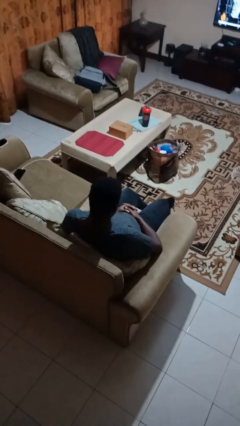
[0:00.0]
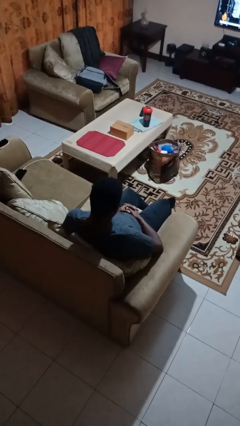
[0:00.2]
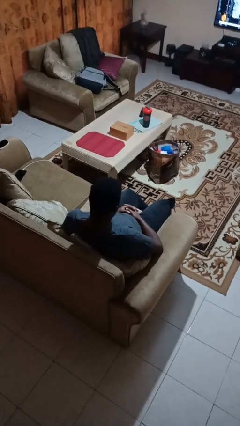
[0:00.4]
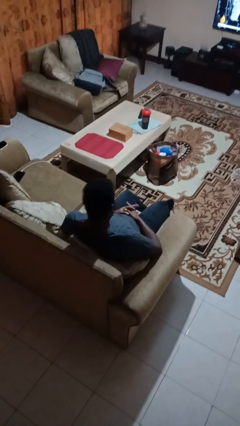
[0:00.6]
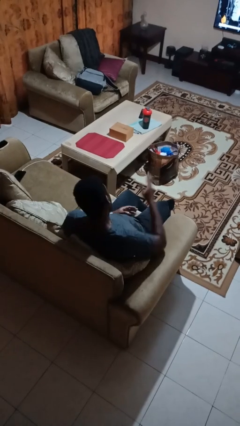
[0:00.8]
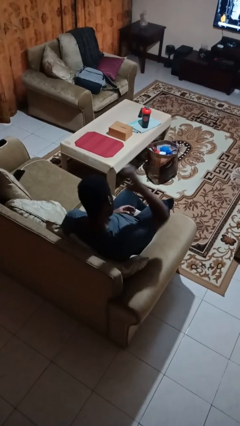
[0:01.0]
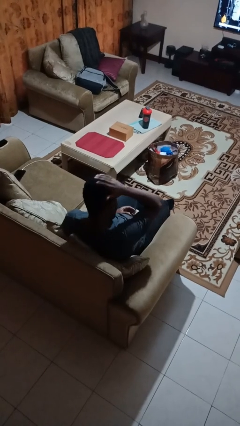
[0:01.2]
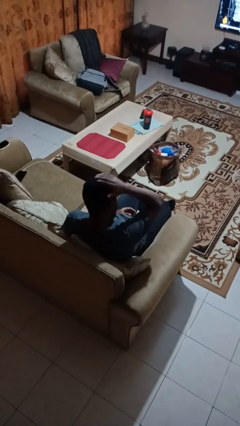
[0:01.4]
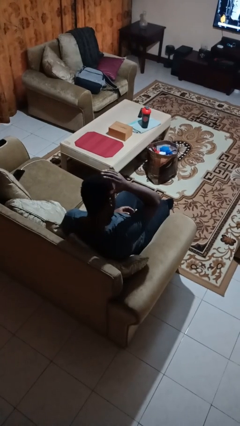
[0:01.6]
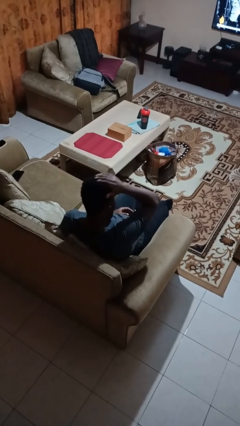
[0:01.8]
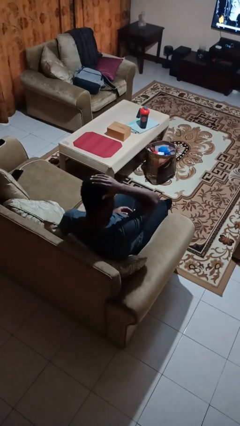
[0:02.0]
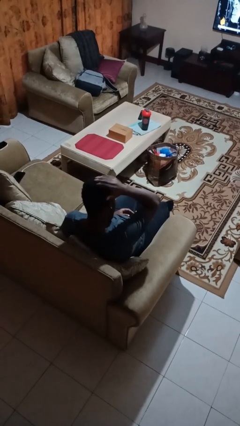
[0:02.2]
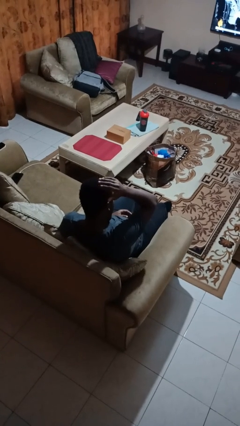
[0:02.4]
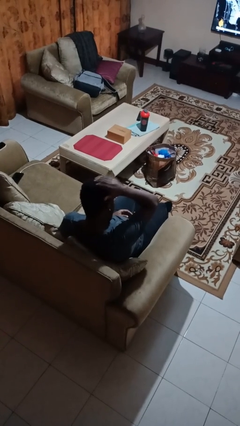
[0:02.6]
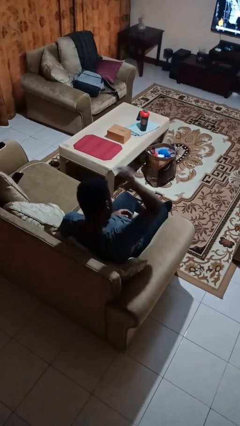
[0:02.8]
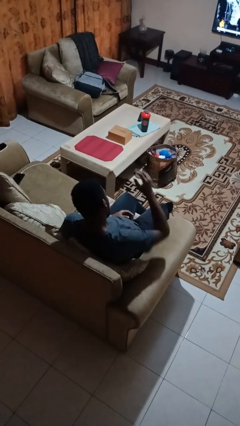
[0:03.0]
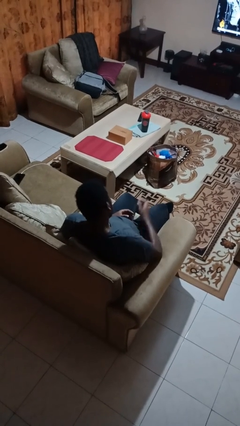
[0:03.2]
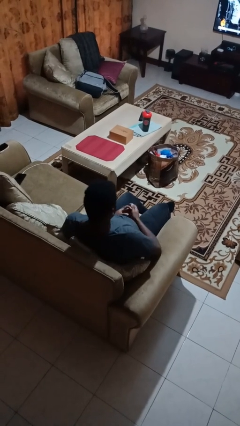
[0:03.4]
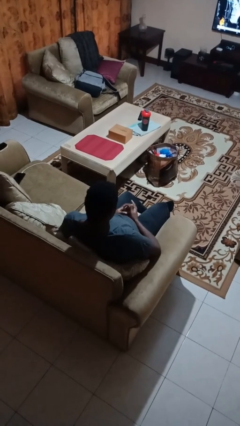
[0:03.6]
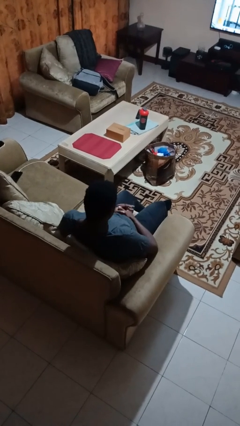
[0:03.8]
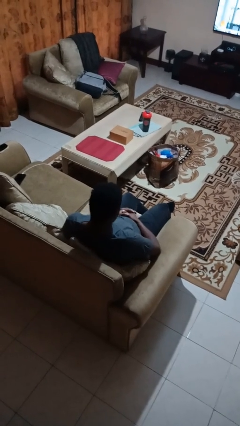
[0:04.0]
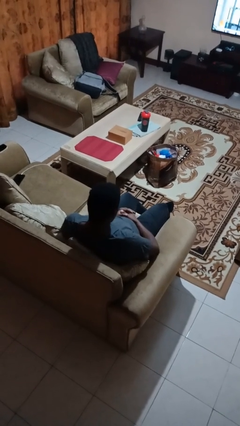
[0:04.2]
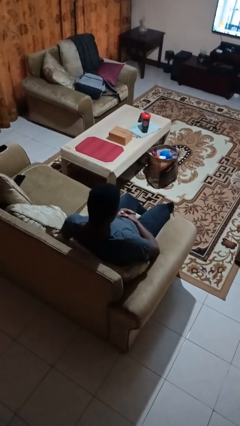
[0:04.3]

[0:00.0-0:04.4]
person pats head

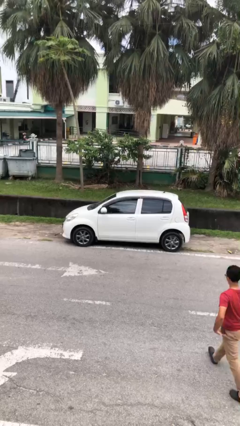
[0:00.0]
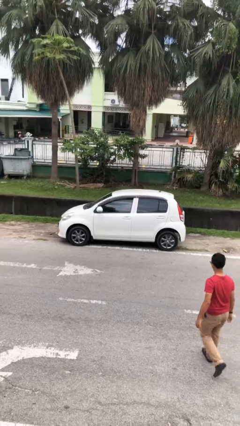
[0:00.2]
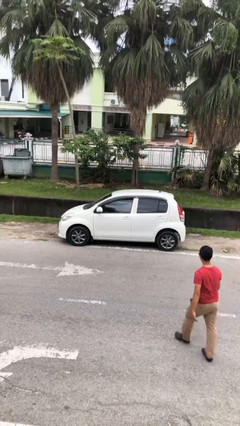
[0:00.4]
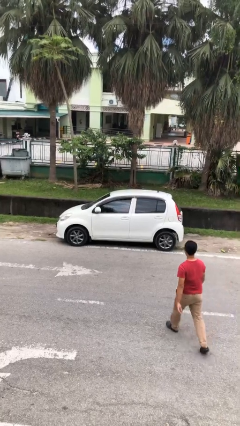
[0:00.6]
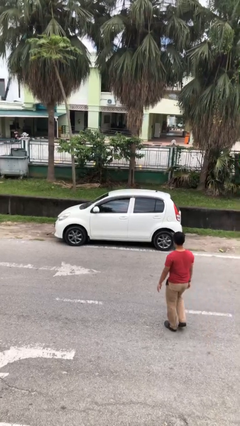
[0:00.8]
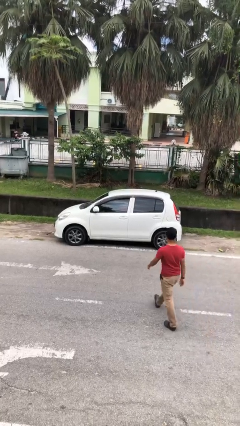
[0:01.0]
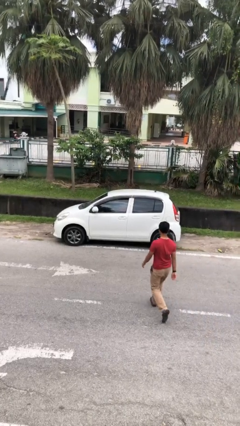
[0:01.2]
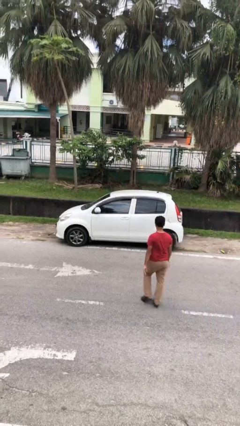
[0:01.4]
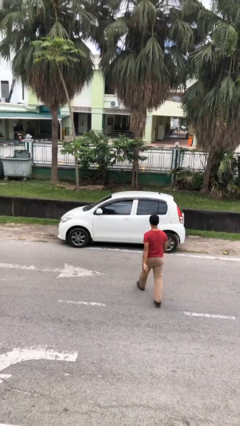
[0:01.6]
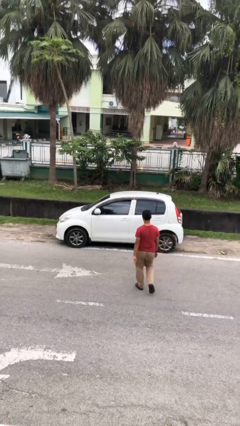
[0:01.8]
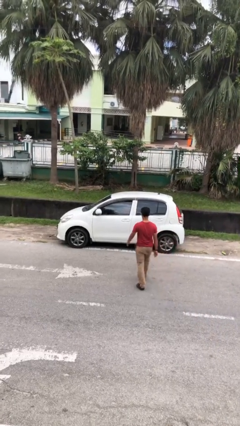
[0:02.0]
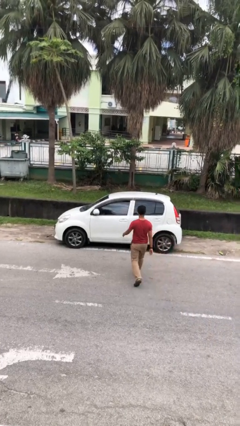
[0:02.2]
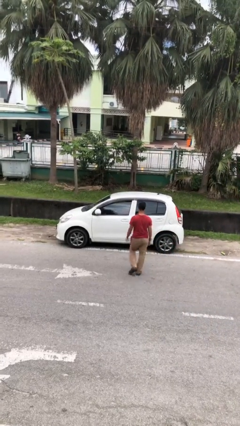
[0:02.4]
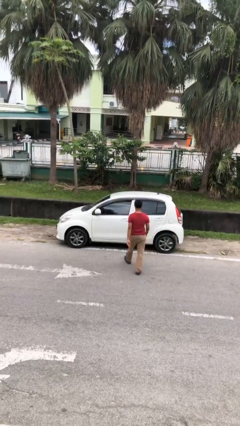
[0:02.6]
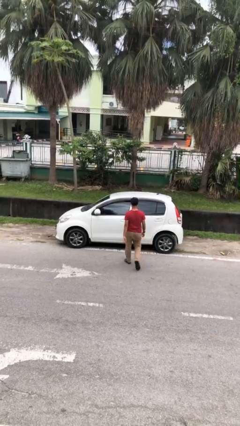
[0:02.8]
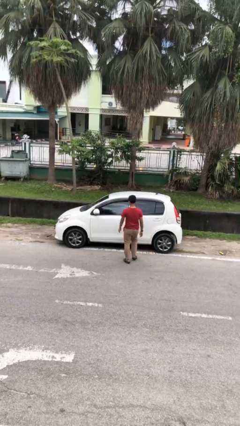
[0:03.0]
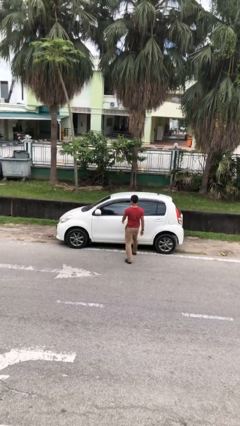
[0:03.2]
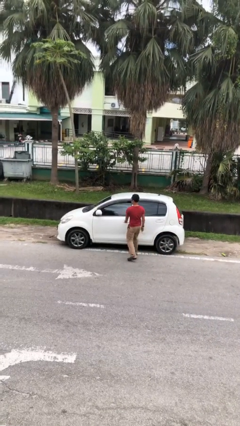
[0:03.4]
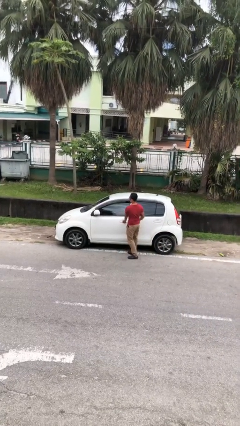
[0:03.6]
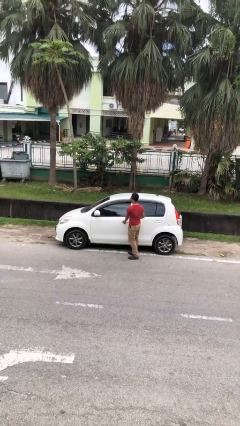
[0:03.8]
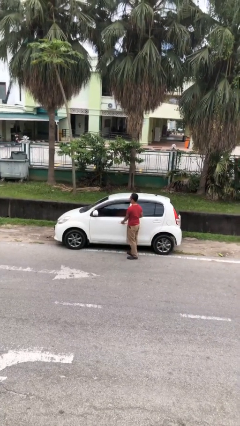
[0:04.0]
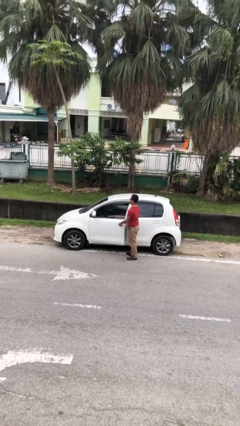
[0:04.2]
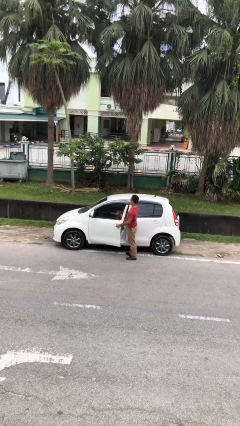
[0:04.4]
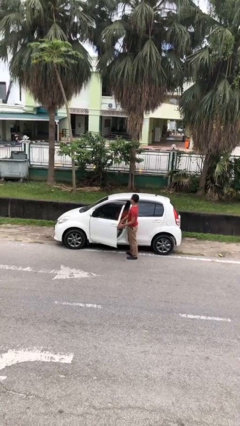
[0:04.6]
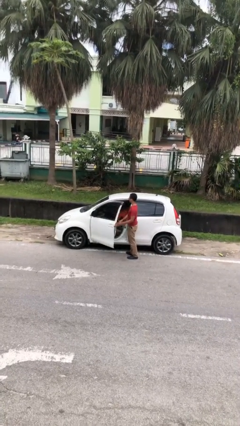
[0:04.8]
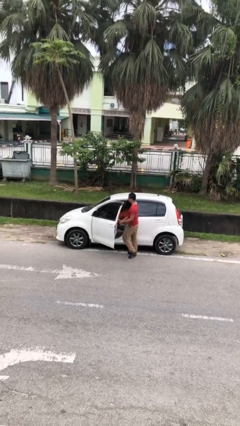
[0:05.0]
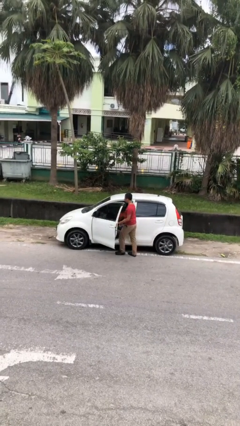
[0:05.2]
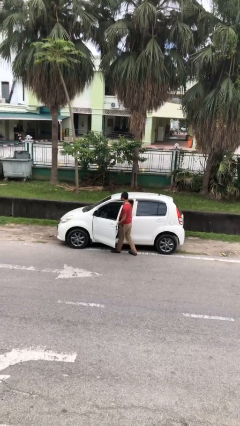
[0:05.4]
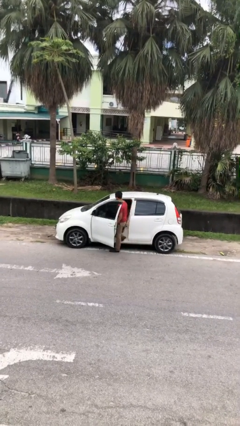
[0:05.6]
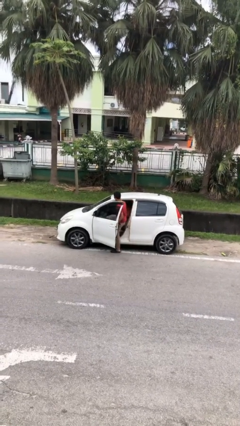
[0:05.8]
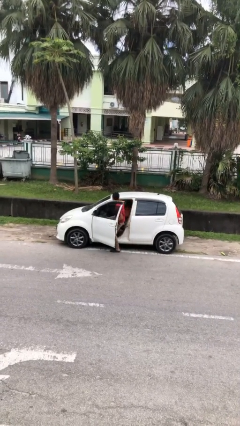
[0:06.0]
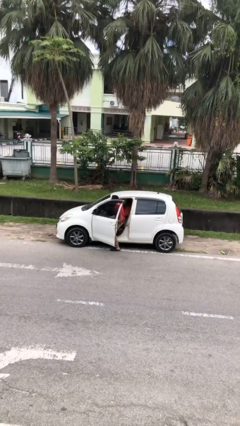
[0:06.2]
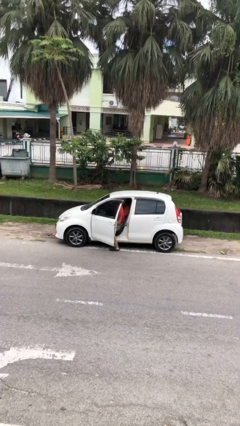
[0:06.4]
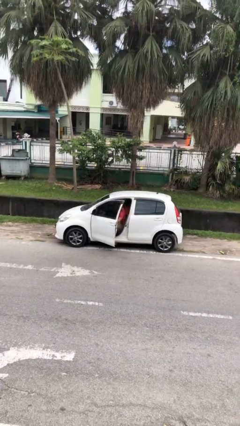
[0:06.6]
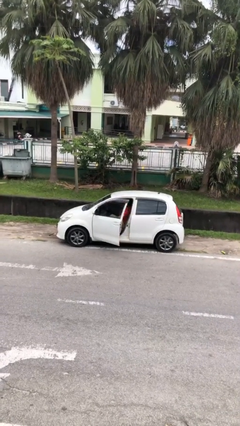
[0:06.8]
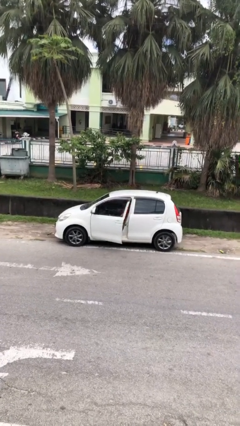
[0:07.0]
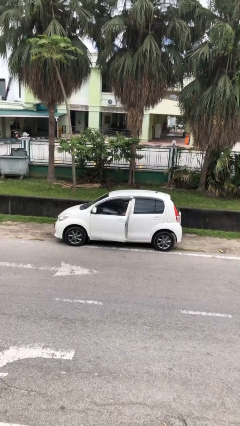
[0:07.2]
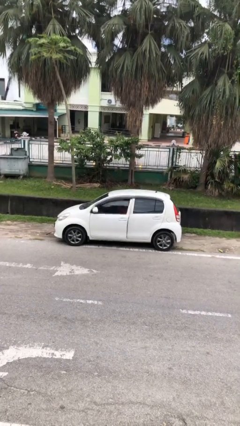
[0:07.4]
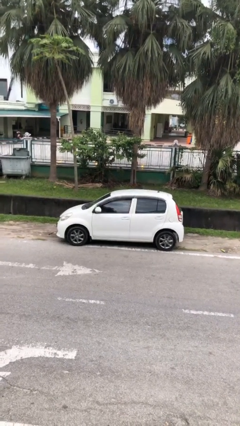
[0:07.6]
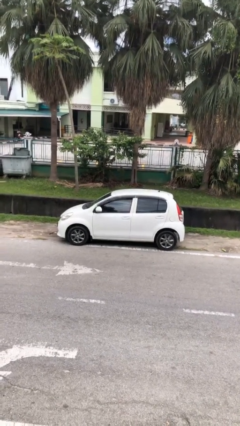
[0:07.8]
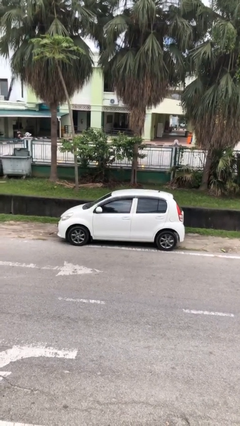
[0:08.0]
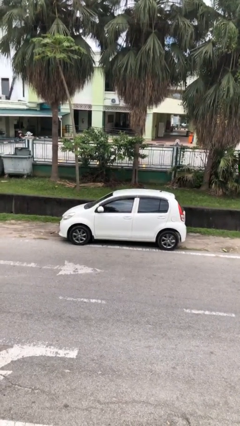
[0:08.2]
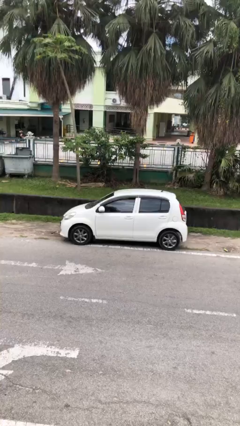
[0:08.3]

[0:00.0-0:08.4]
car picks up person

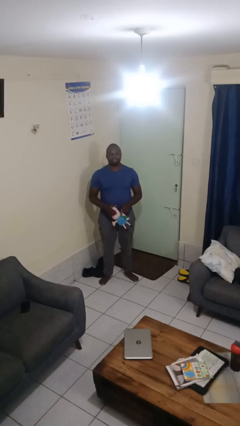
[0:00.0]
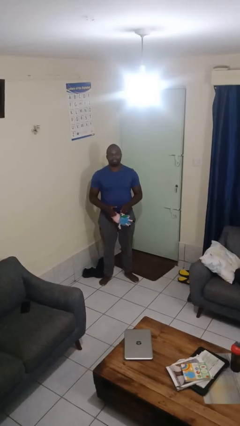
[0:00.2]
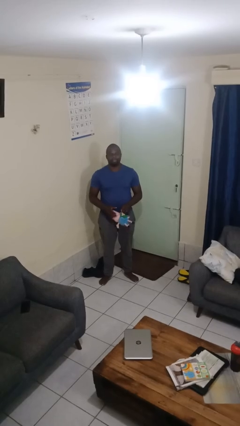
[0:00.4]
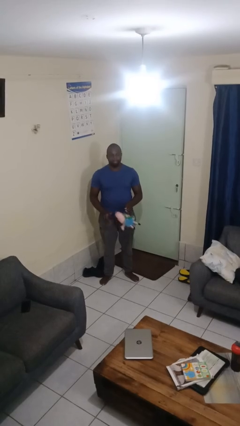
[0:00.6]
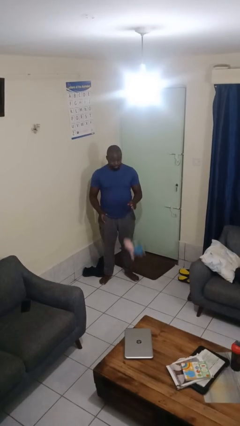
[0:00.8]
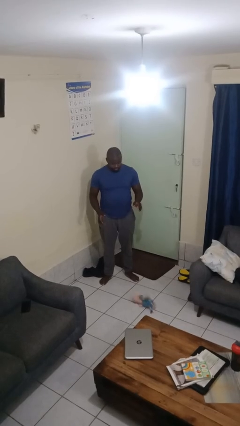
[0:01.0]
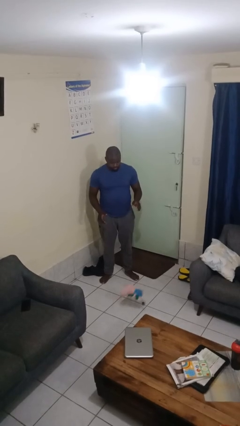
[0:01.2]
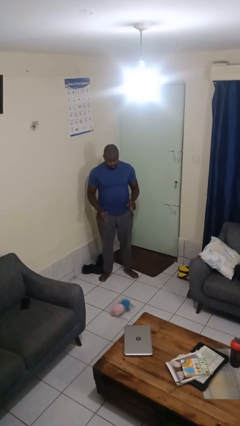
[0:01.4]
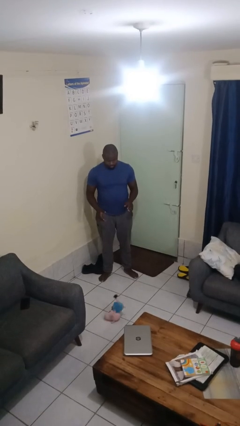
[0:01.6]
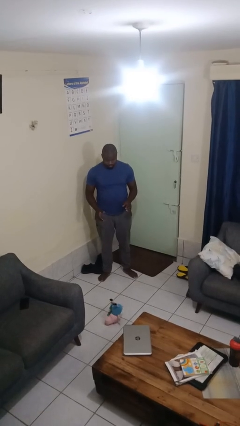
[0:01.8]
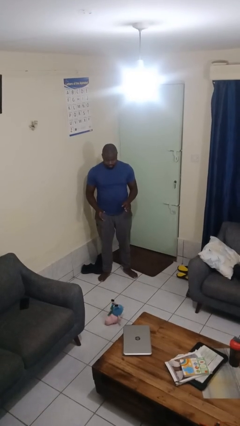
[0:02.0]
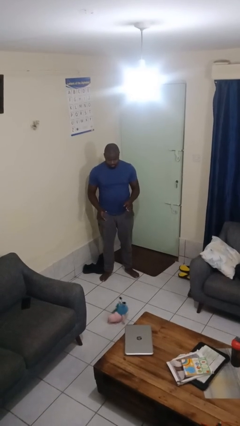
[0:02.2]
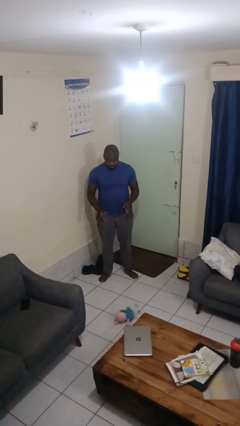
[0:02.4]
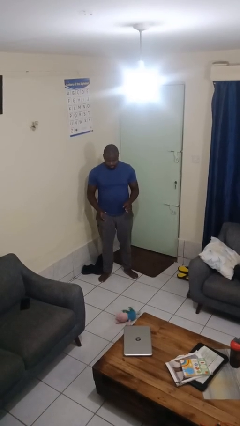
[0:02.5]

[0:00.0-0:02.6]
person drops object

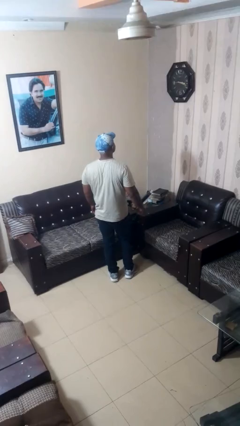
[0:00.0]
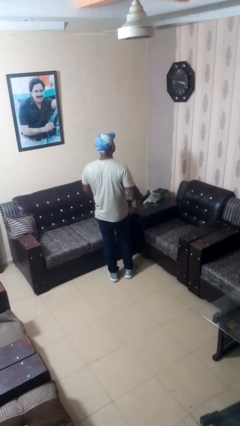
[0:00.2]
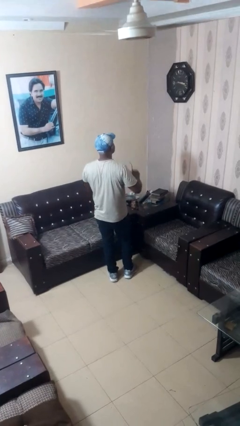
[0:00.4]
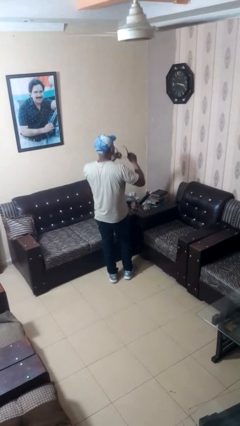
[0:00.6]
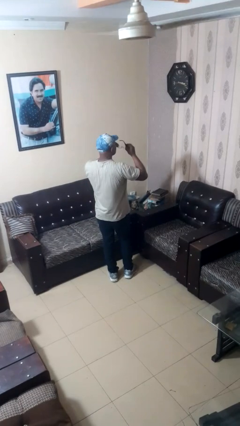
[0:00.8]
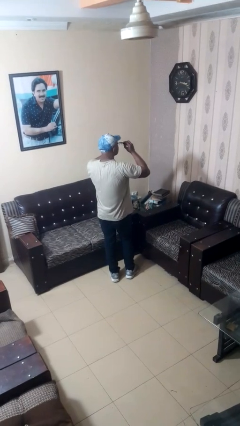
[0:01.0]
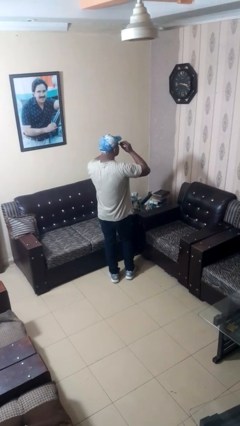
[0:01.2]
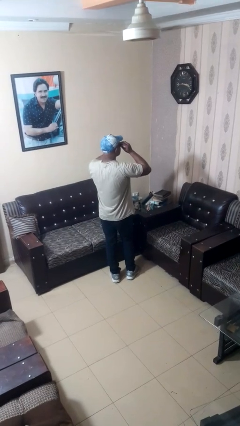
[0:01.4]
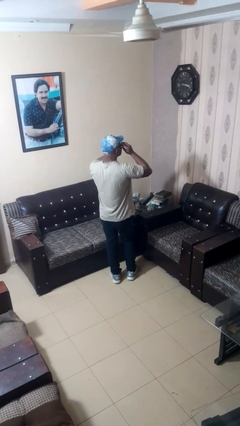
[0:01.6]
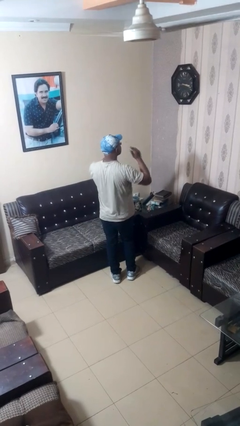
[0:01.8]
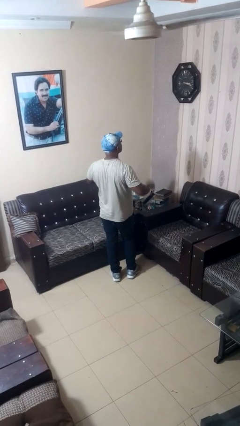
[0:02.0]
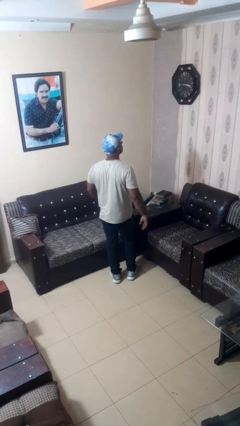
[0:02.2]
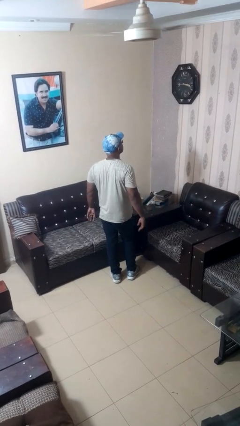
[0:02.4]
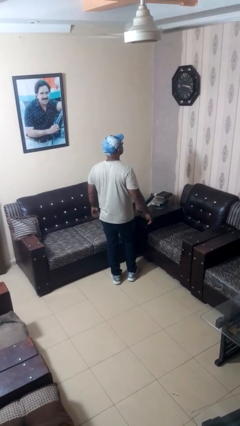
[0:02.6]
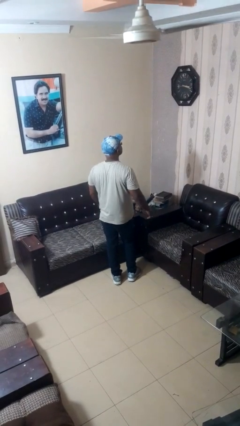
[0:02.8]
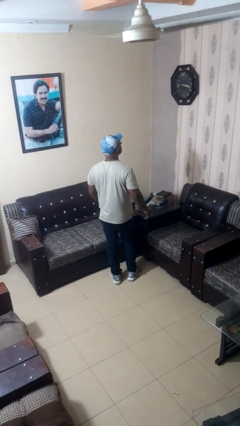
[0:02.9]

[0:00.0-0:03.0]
person puts on glasses
